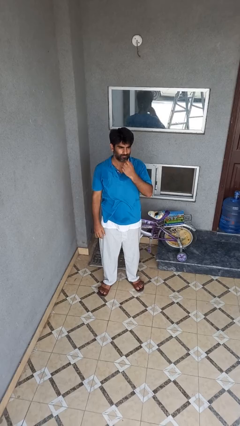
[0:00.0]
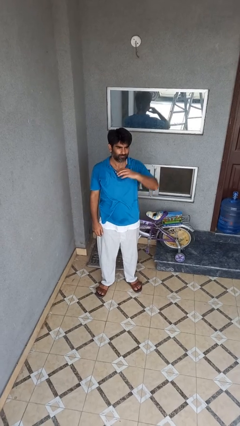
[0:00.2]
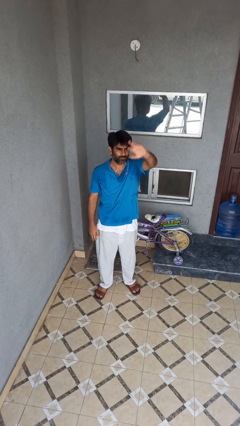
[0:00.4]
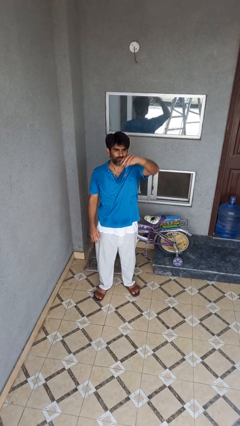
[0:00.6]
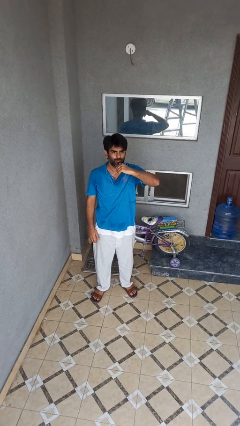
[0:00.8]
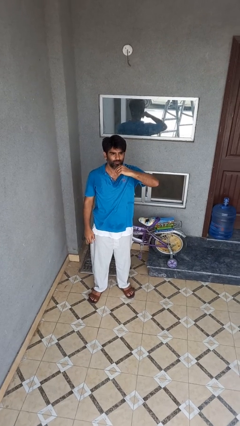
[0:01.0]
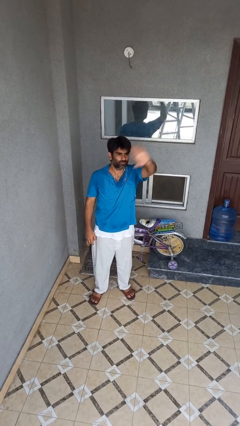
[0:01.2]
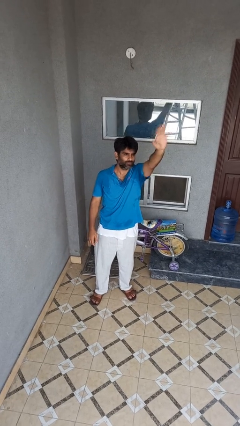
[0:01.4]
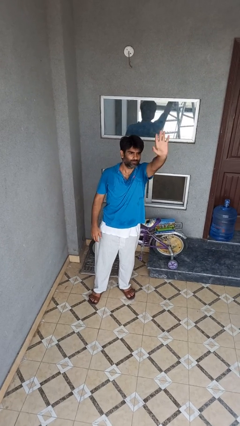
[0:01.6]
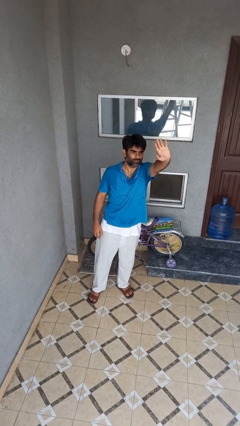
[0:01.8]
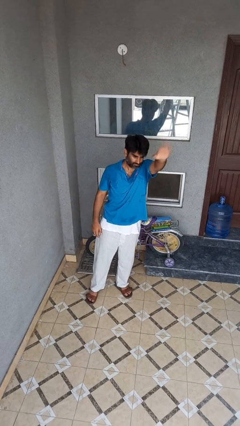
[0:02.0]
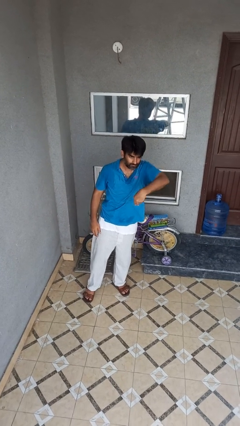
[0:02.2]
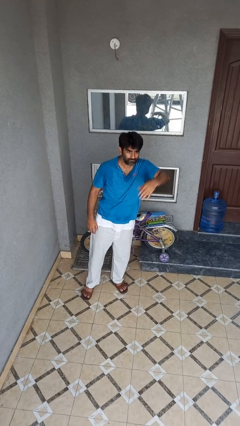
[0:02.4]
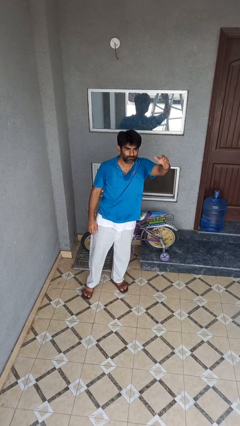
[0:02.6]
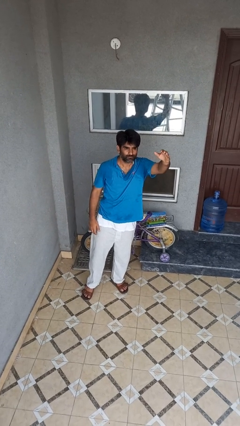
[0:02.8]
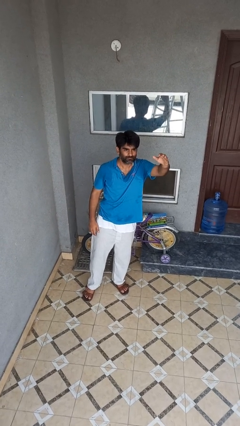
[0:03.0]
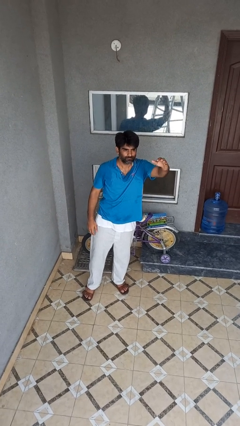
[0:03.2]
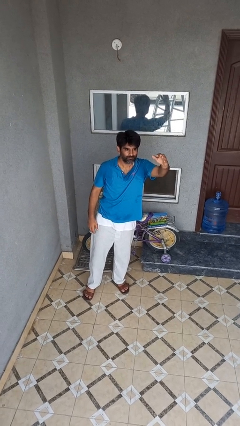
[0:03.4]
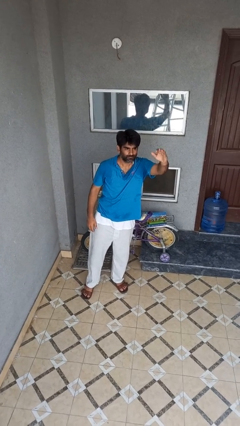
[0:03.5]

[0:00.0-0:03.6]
person gestures come here

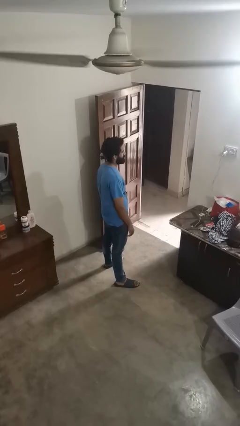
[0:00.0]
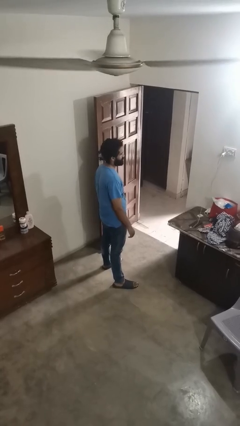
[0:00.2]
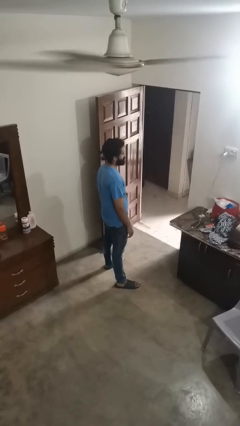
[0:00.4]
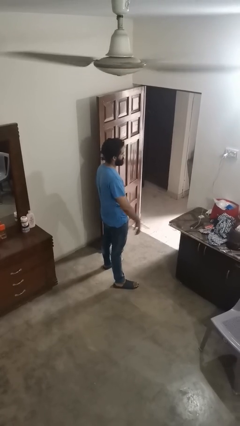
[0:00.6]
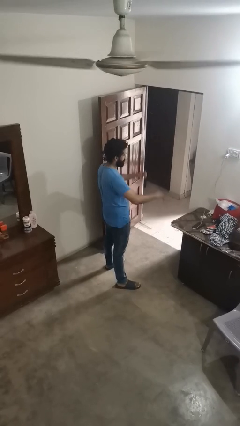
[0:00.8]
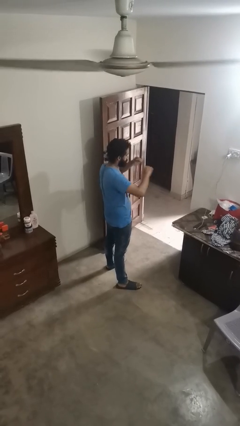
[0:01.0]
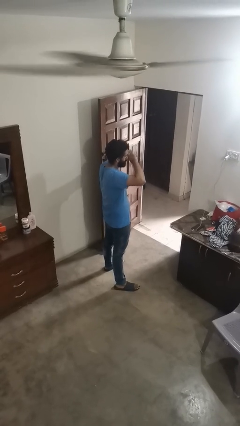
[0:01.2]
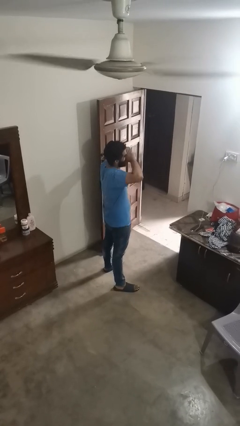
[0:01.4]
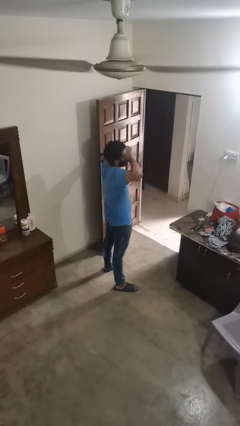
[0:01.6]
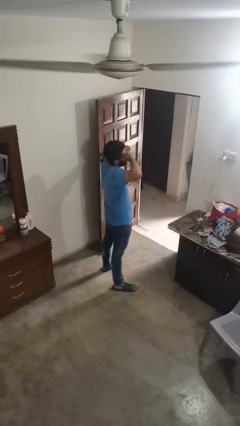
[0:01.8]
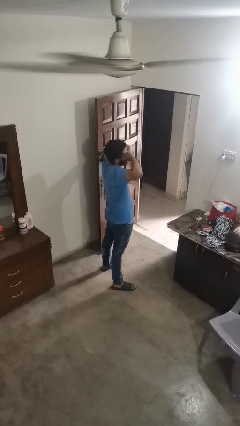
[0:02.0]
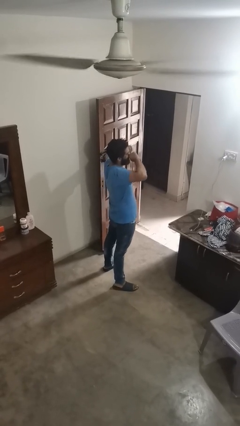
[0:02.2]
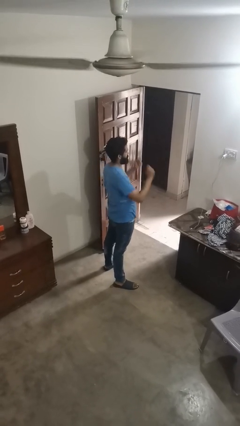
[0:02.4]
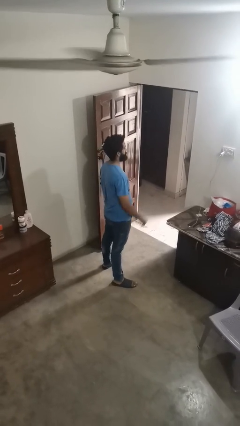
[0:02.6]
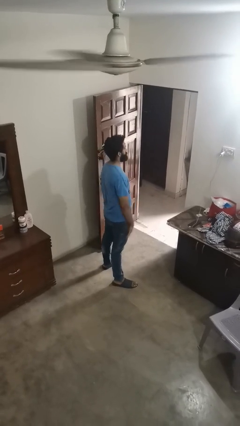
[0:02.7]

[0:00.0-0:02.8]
person rubs eyes

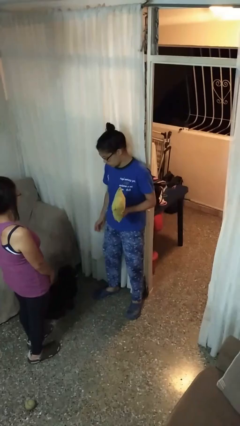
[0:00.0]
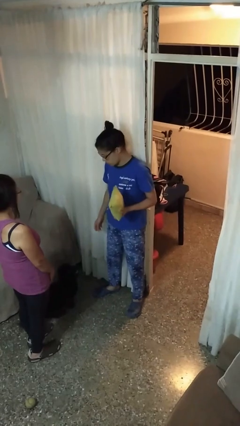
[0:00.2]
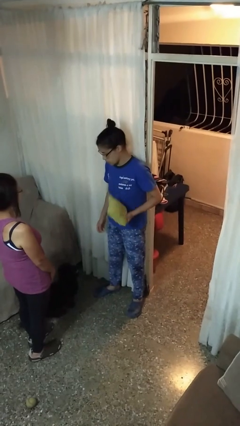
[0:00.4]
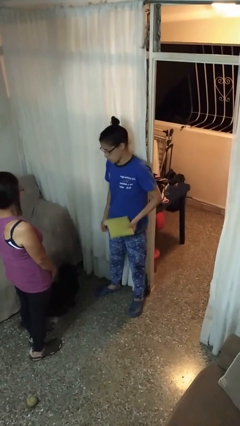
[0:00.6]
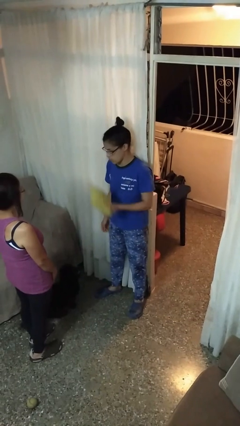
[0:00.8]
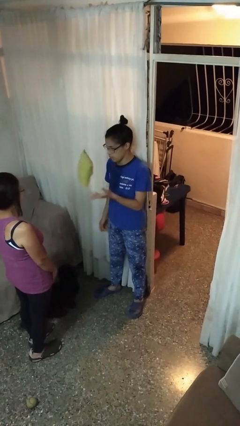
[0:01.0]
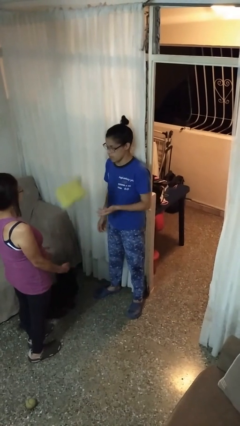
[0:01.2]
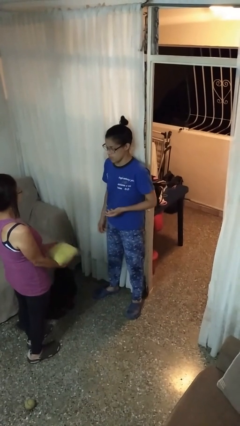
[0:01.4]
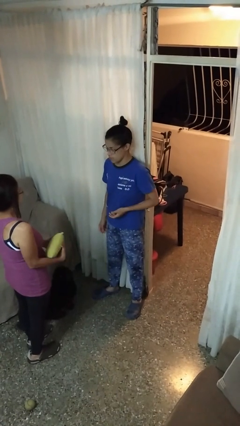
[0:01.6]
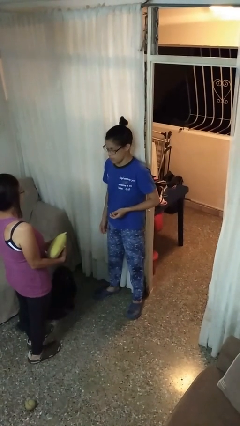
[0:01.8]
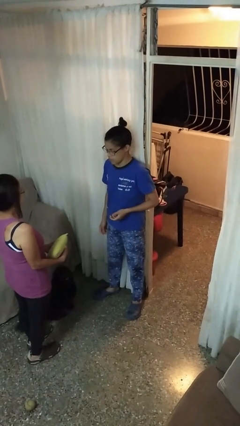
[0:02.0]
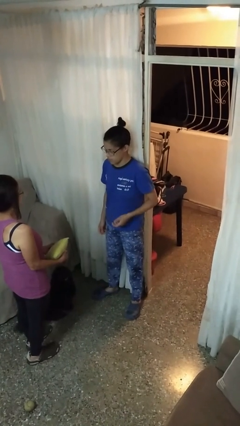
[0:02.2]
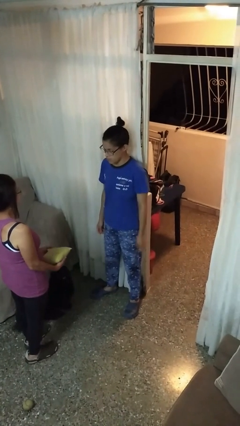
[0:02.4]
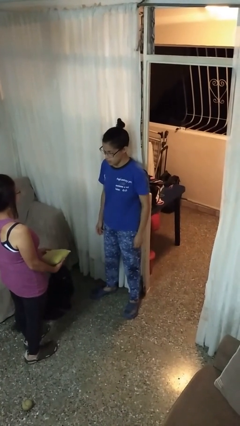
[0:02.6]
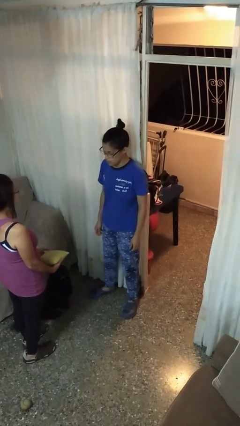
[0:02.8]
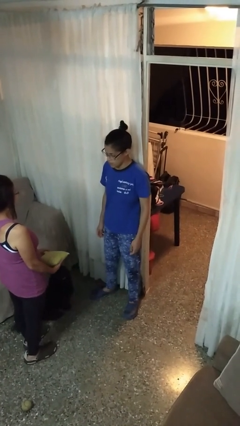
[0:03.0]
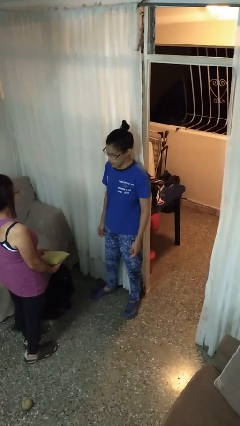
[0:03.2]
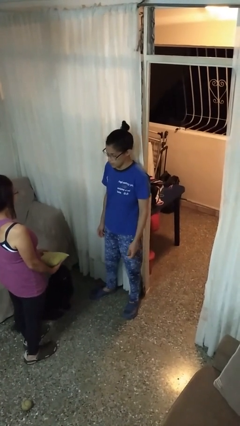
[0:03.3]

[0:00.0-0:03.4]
person throws object to person

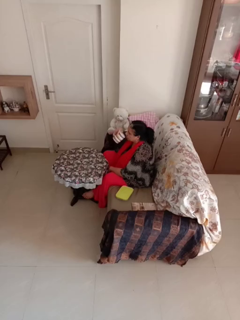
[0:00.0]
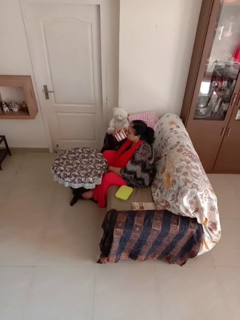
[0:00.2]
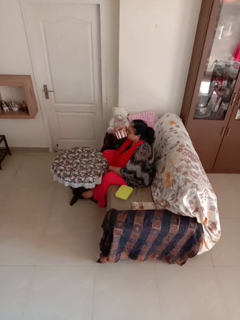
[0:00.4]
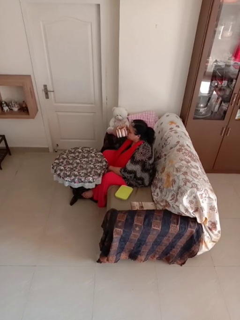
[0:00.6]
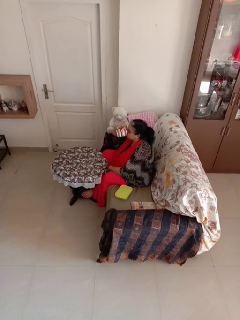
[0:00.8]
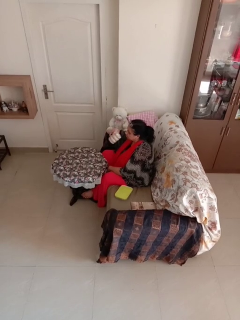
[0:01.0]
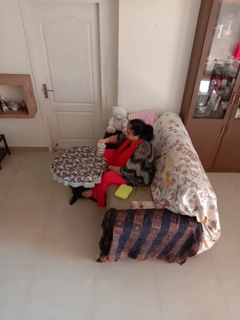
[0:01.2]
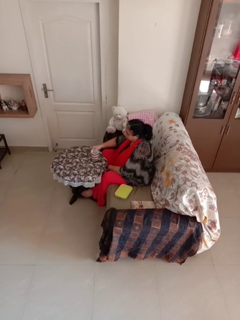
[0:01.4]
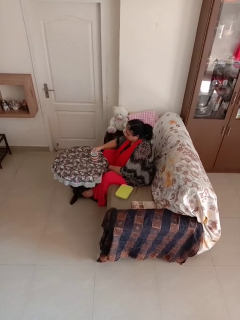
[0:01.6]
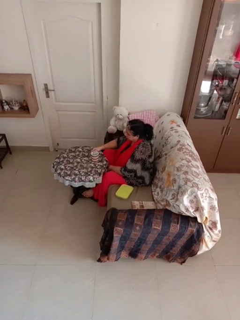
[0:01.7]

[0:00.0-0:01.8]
person drinks from mug

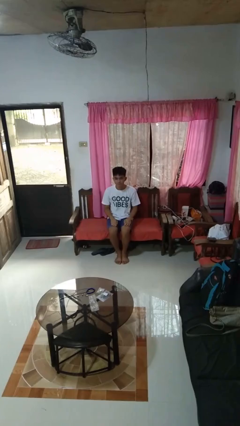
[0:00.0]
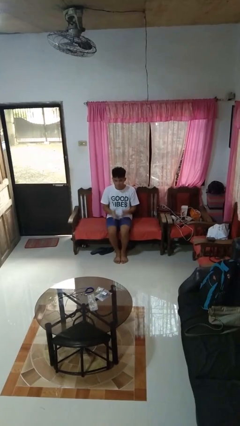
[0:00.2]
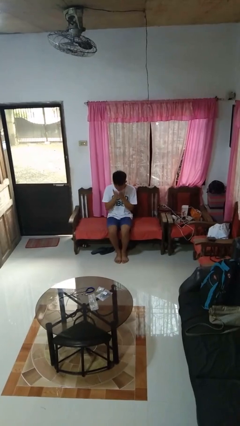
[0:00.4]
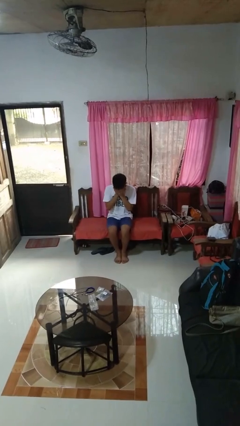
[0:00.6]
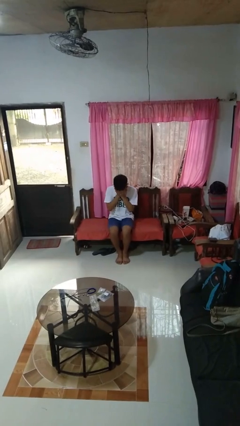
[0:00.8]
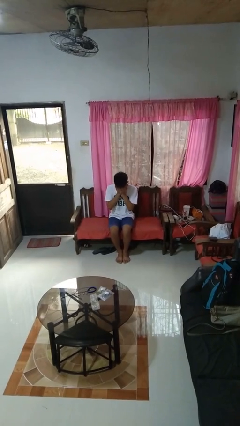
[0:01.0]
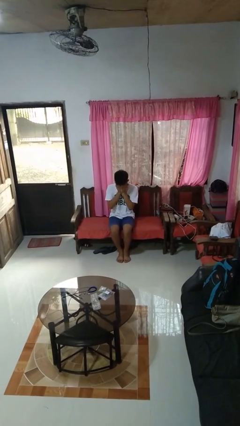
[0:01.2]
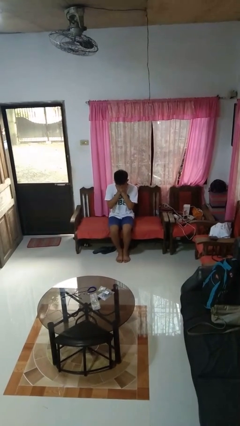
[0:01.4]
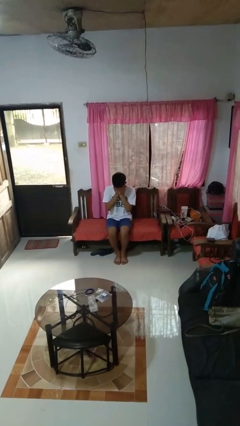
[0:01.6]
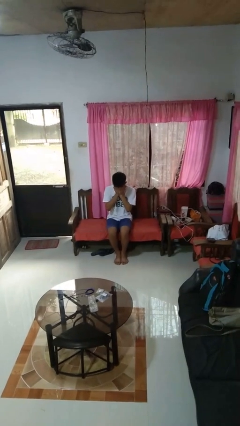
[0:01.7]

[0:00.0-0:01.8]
person covers face with hands

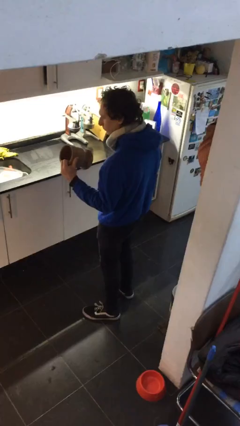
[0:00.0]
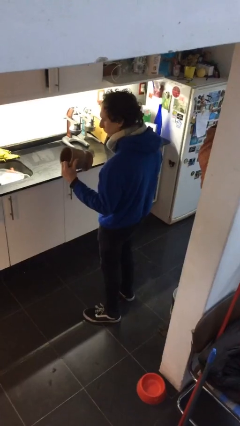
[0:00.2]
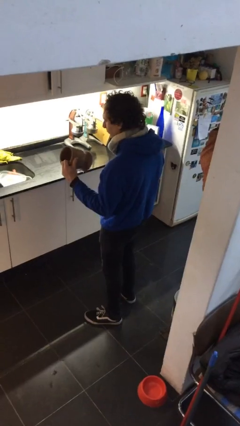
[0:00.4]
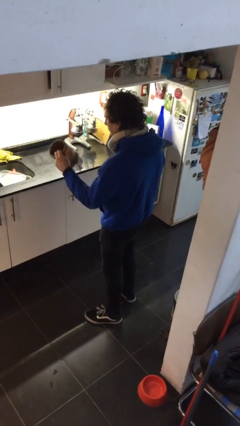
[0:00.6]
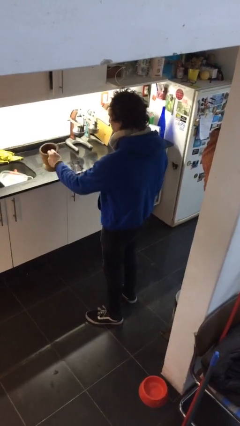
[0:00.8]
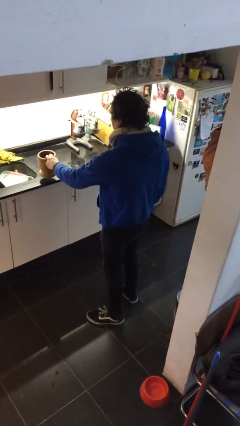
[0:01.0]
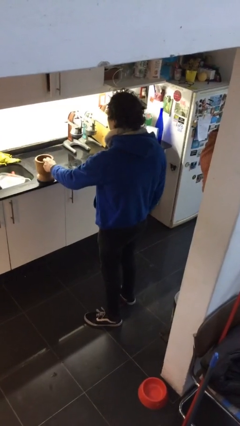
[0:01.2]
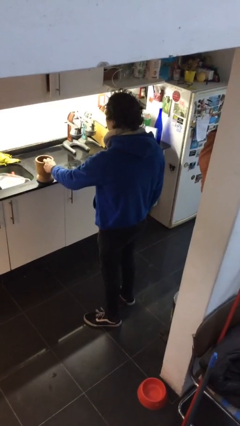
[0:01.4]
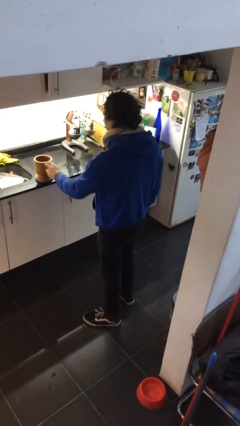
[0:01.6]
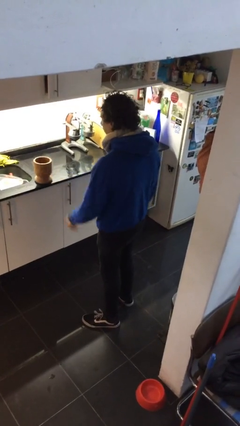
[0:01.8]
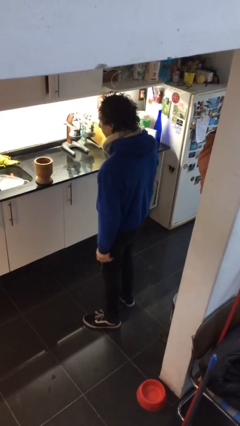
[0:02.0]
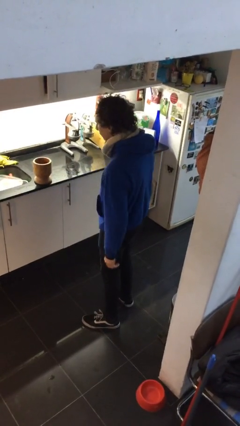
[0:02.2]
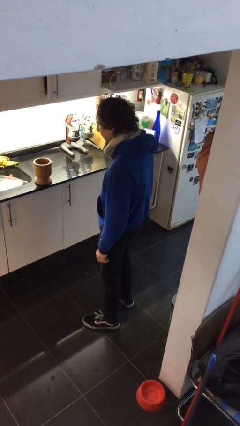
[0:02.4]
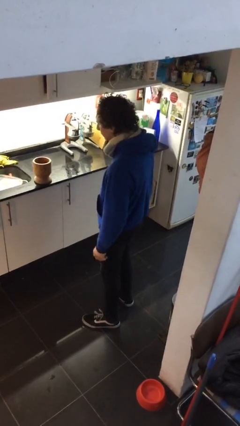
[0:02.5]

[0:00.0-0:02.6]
person puts down object on countertop

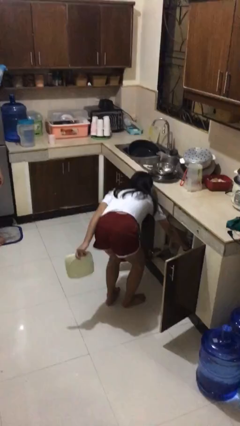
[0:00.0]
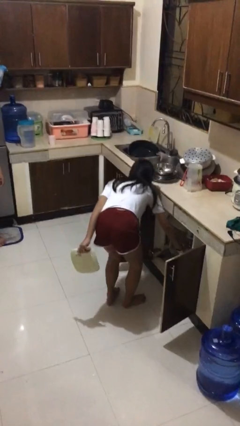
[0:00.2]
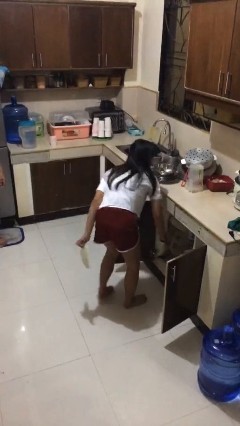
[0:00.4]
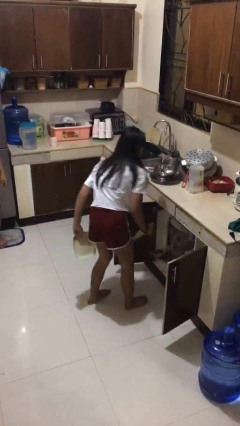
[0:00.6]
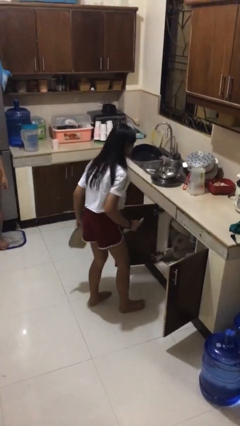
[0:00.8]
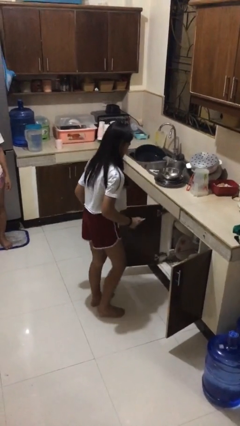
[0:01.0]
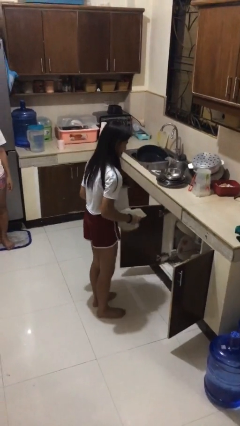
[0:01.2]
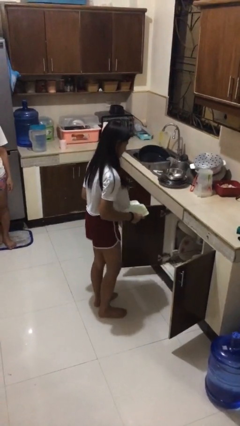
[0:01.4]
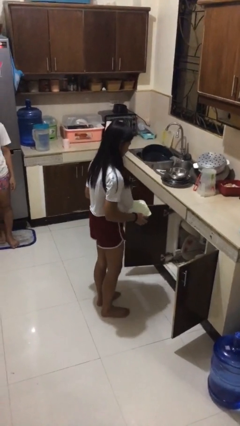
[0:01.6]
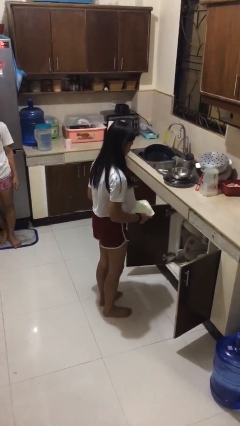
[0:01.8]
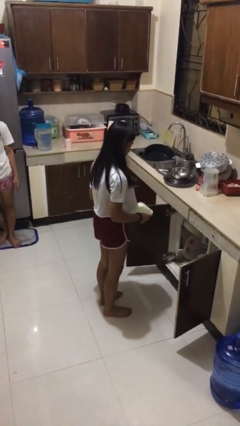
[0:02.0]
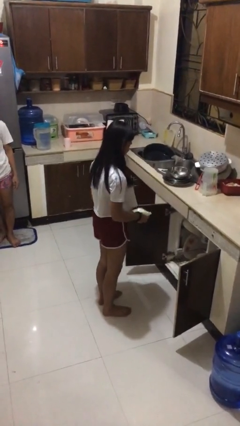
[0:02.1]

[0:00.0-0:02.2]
person unloads dishwasher
